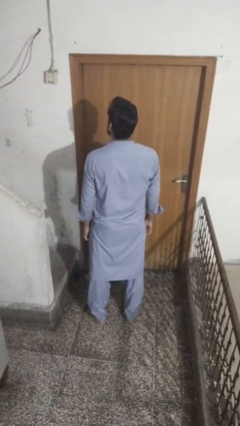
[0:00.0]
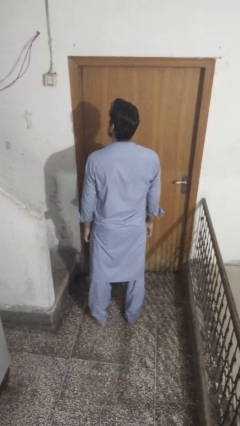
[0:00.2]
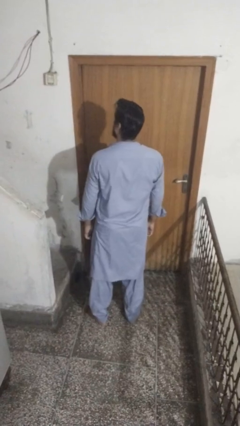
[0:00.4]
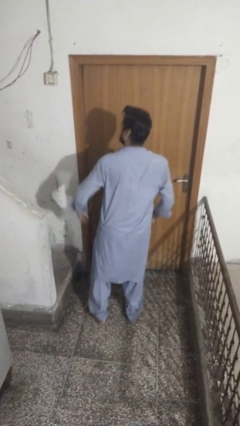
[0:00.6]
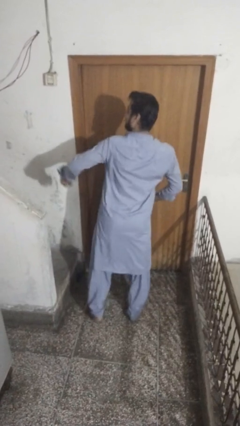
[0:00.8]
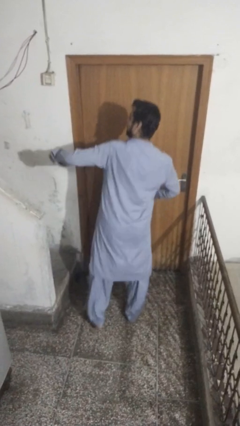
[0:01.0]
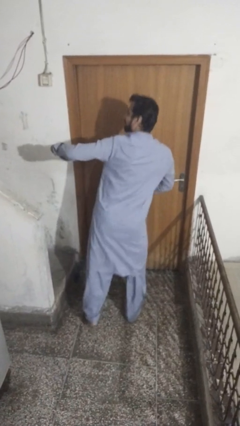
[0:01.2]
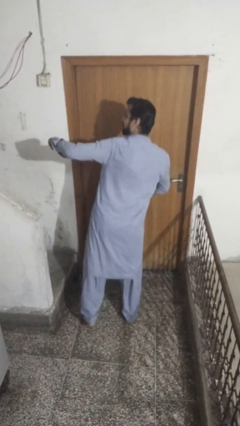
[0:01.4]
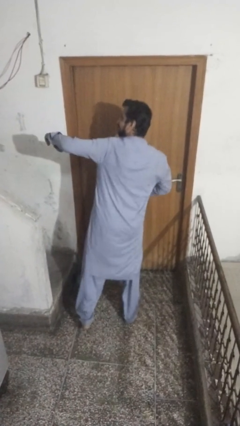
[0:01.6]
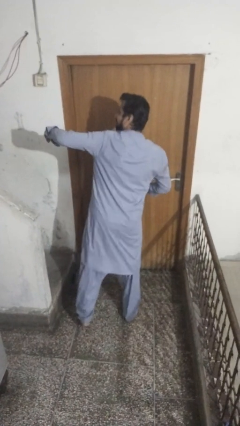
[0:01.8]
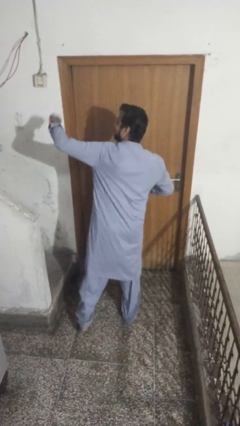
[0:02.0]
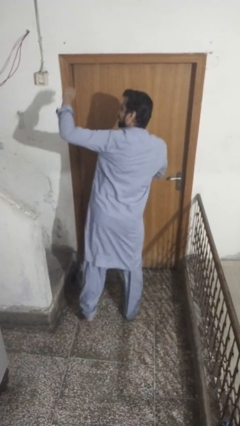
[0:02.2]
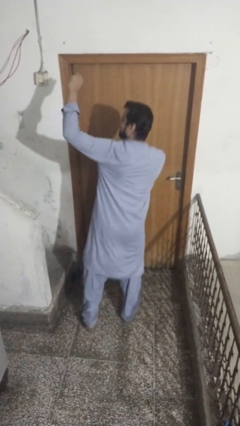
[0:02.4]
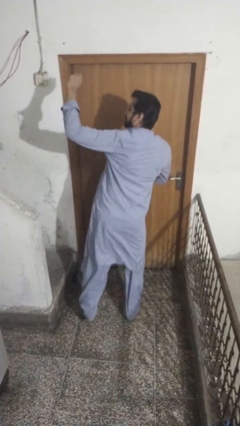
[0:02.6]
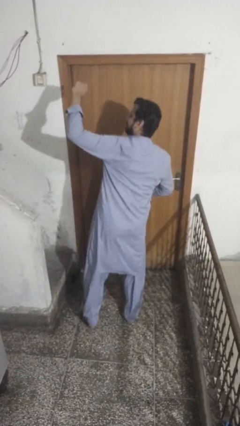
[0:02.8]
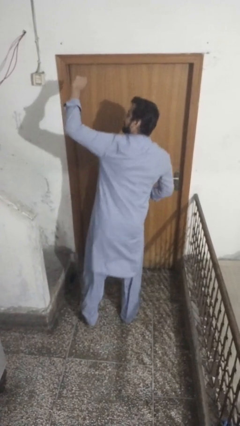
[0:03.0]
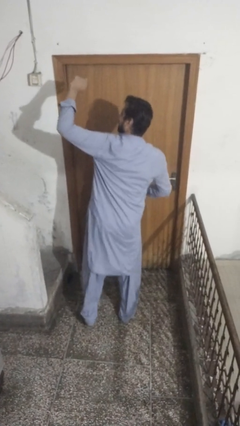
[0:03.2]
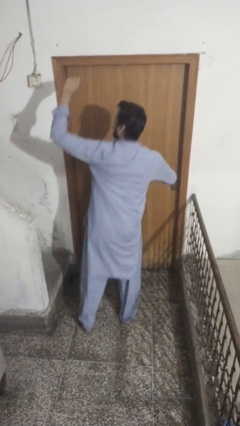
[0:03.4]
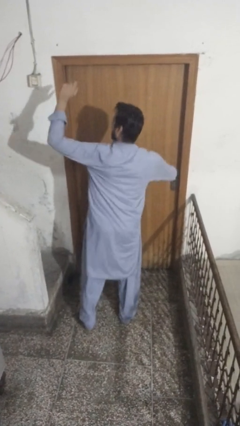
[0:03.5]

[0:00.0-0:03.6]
person dances in place

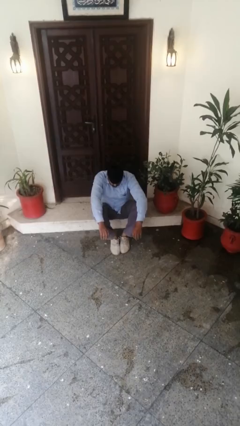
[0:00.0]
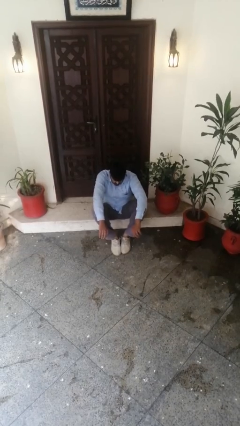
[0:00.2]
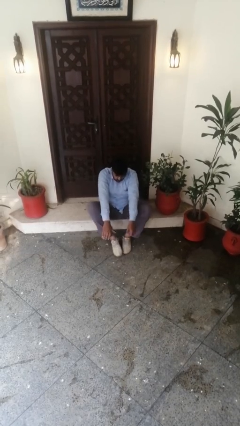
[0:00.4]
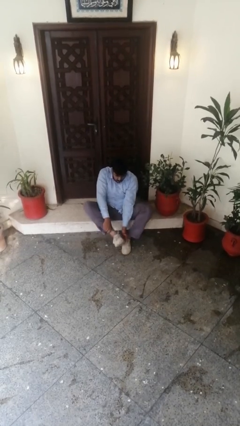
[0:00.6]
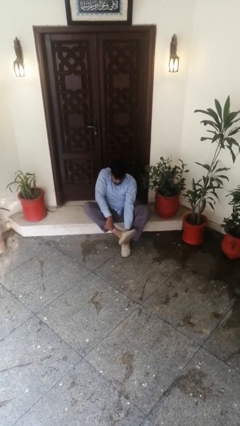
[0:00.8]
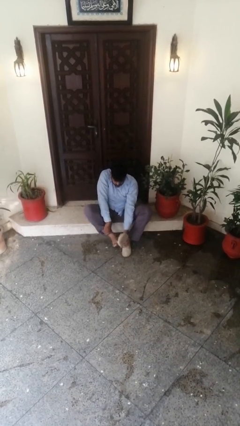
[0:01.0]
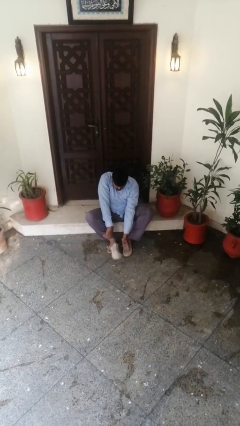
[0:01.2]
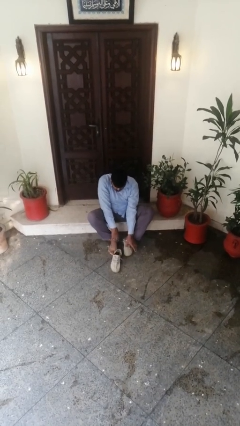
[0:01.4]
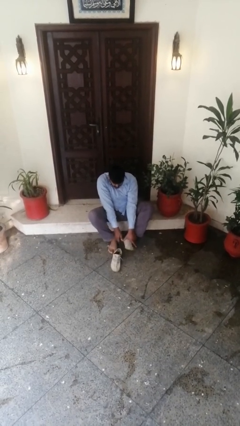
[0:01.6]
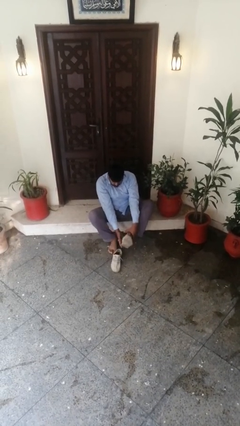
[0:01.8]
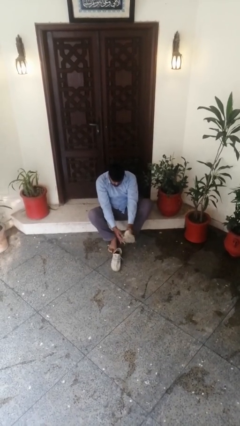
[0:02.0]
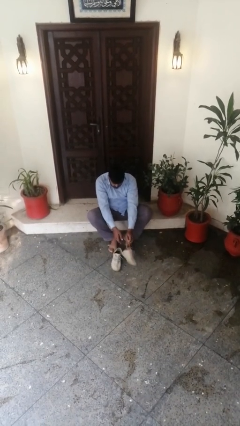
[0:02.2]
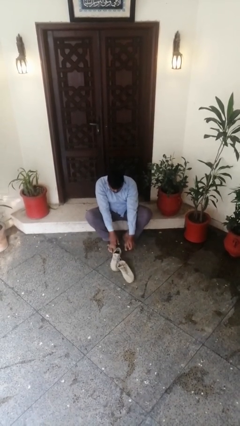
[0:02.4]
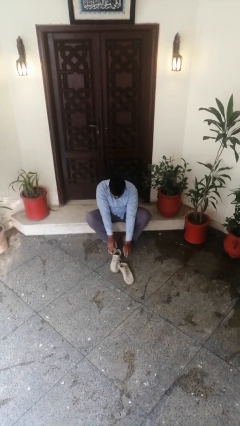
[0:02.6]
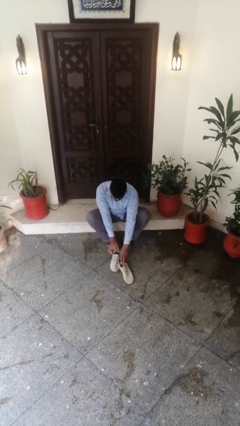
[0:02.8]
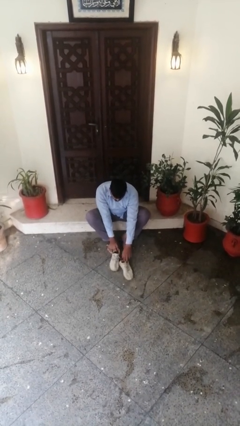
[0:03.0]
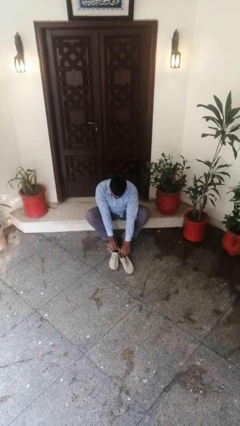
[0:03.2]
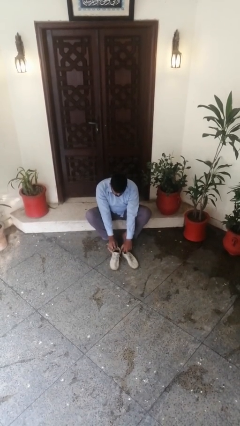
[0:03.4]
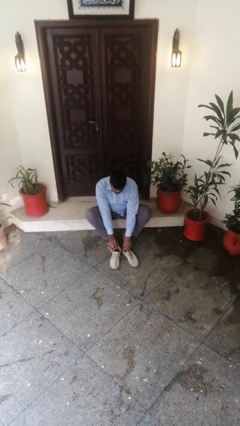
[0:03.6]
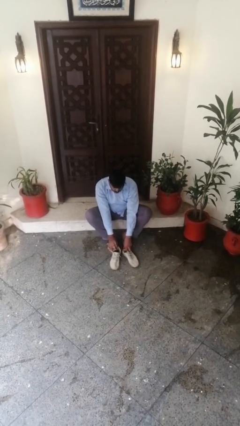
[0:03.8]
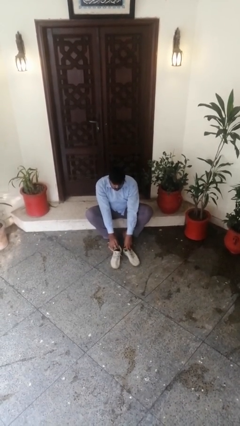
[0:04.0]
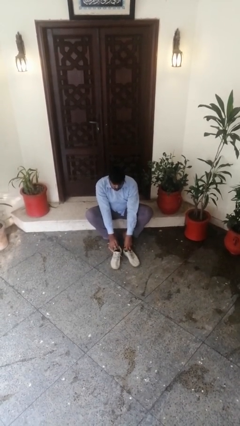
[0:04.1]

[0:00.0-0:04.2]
person takes off shoes

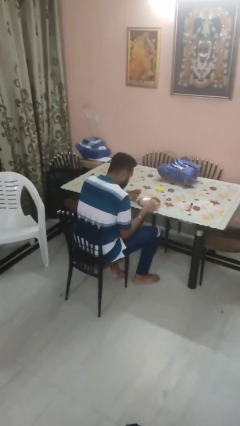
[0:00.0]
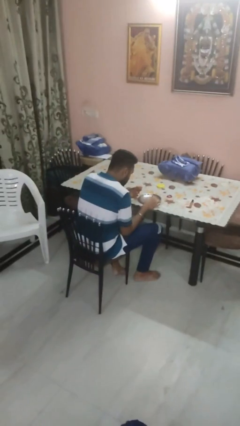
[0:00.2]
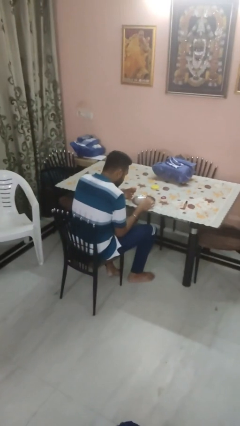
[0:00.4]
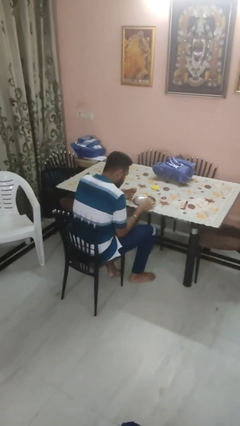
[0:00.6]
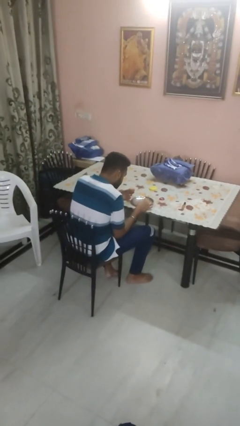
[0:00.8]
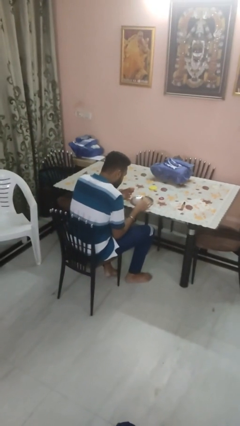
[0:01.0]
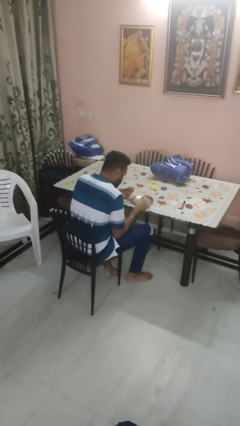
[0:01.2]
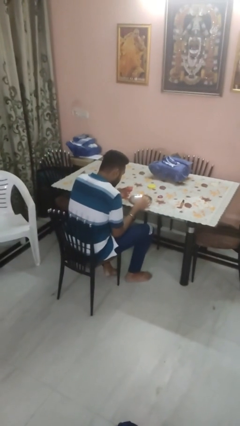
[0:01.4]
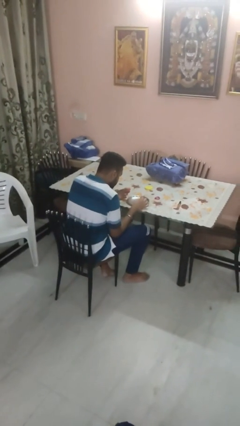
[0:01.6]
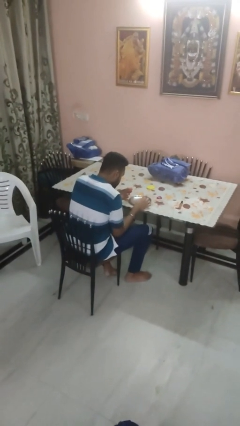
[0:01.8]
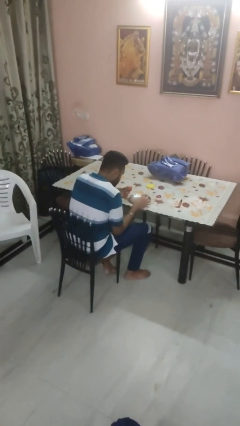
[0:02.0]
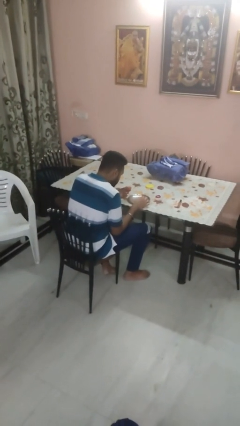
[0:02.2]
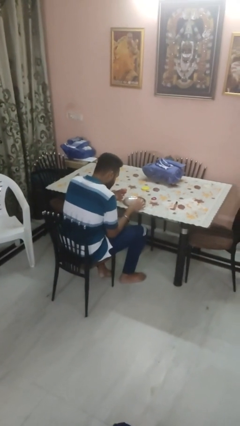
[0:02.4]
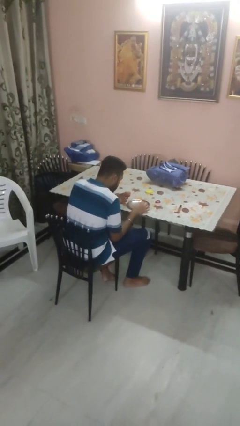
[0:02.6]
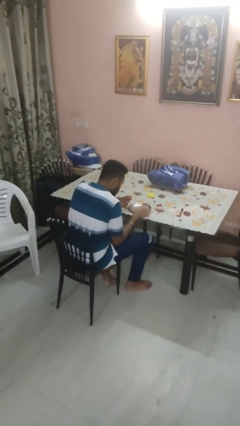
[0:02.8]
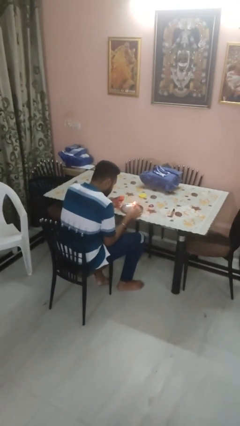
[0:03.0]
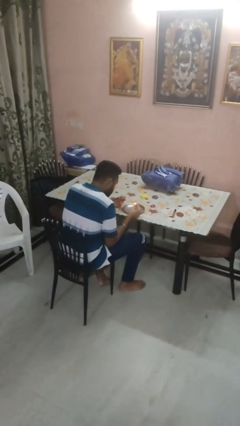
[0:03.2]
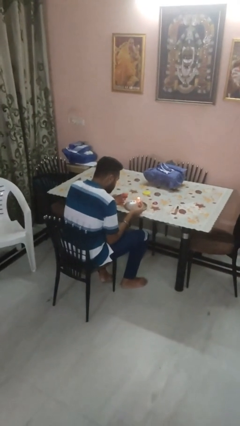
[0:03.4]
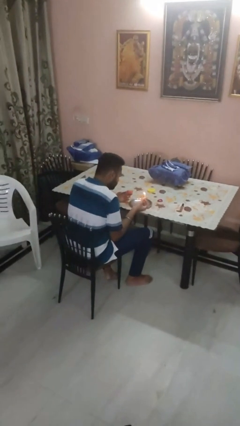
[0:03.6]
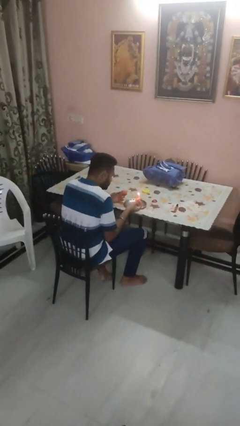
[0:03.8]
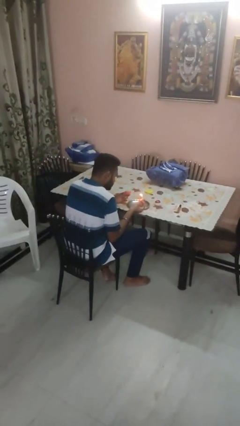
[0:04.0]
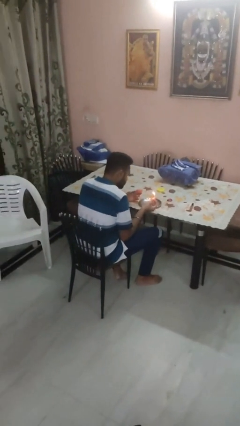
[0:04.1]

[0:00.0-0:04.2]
person lights candle

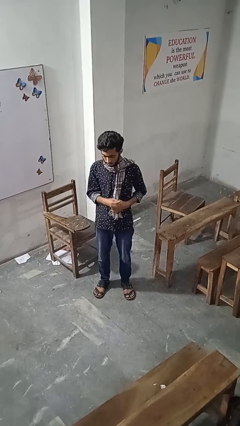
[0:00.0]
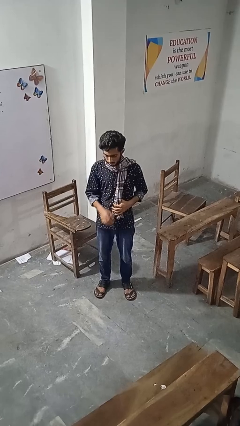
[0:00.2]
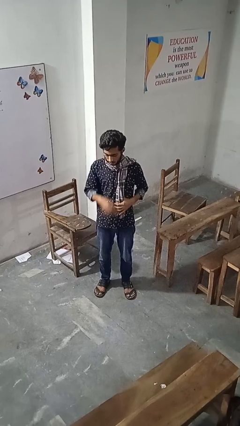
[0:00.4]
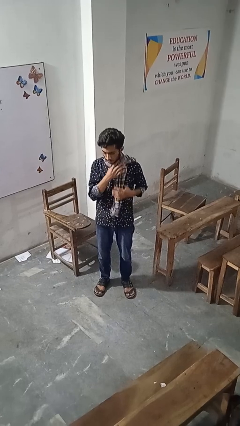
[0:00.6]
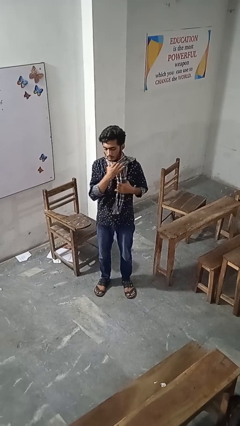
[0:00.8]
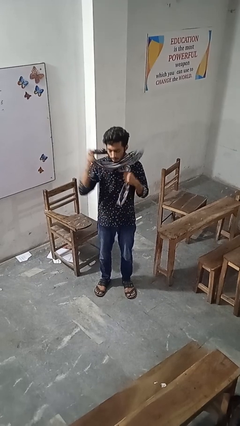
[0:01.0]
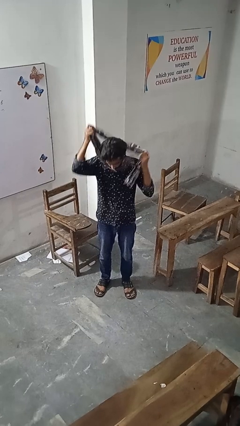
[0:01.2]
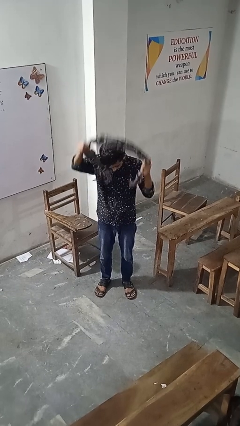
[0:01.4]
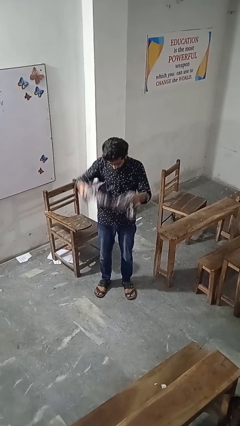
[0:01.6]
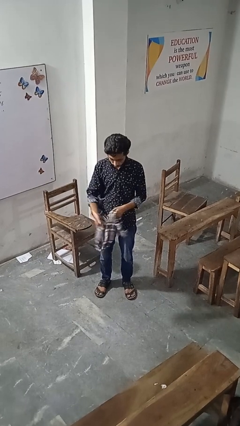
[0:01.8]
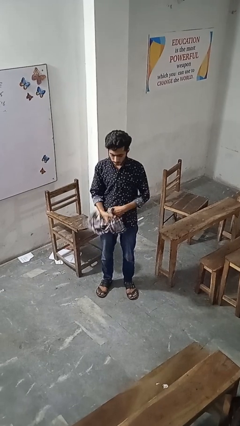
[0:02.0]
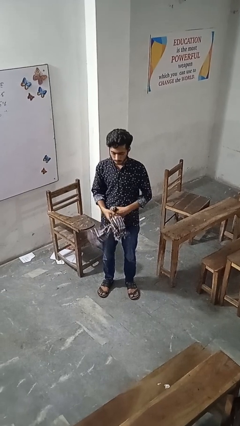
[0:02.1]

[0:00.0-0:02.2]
person takes off scarf

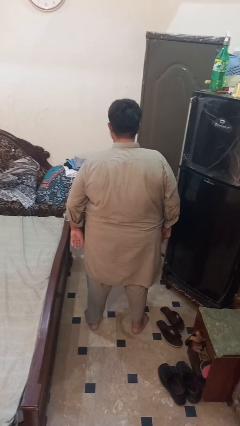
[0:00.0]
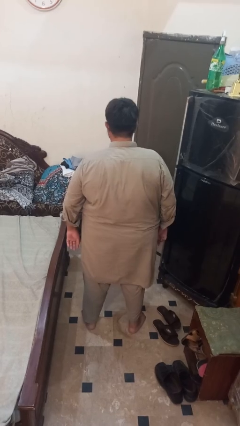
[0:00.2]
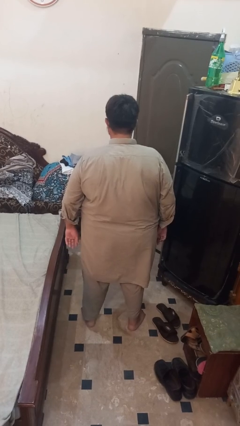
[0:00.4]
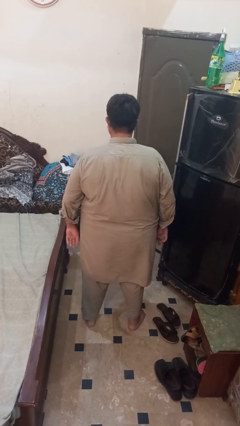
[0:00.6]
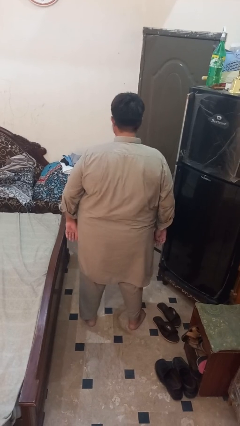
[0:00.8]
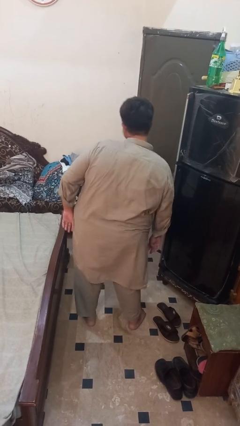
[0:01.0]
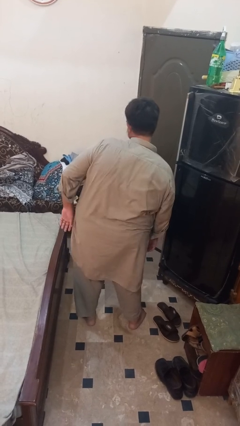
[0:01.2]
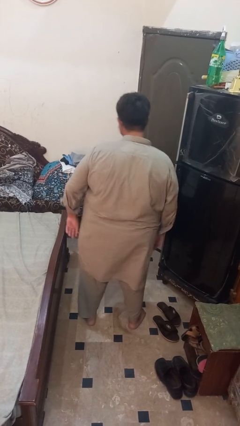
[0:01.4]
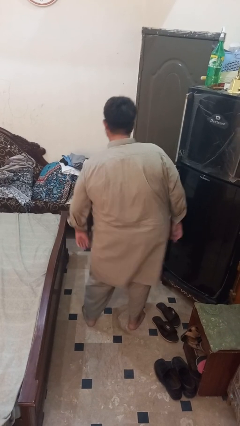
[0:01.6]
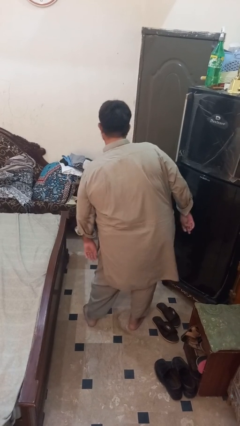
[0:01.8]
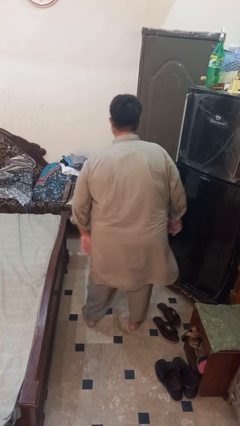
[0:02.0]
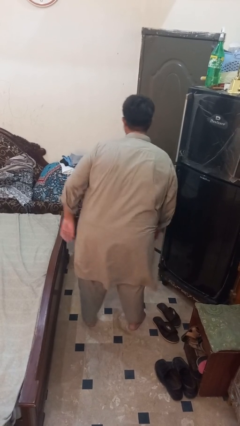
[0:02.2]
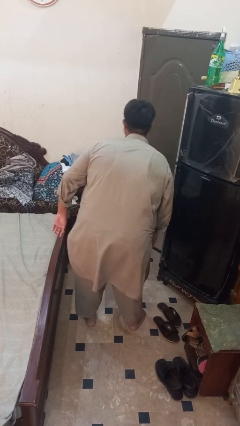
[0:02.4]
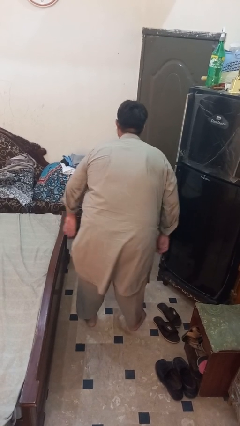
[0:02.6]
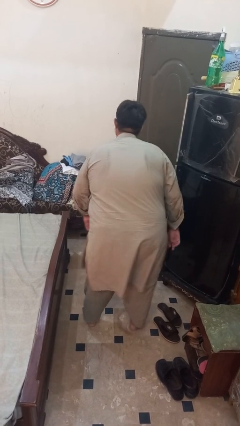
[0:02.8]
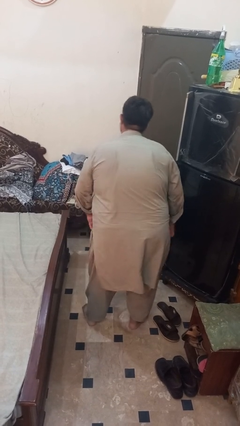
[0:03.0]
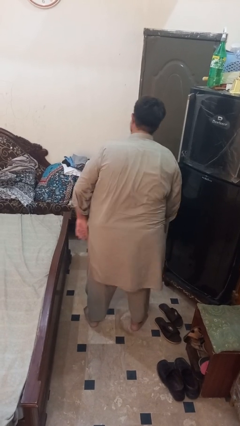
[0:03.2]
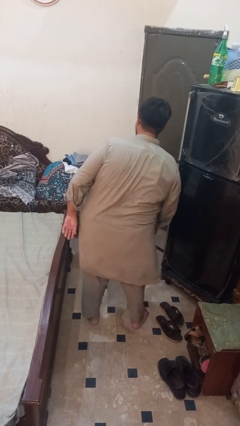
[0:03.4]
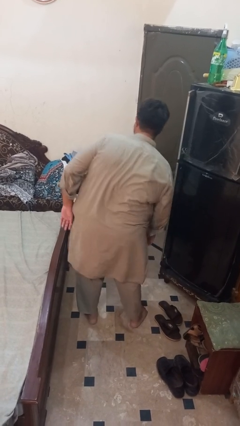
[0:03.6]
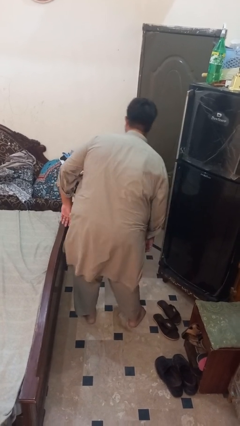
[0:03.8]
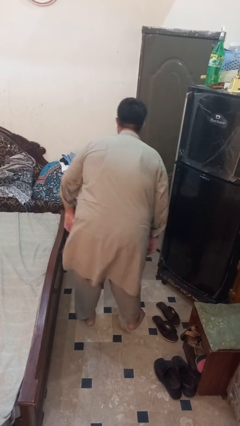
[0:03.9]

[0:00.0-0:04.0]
person wiggles hips
